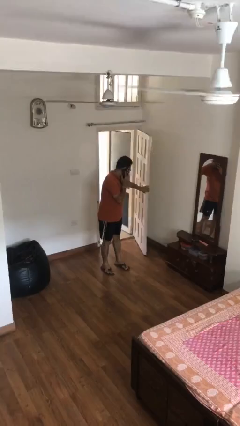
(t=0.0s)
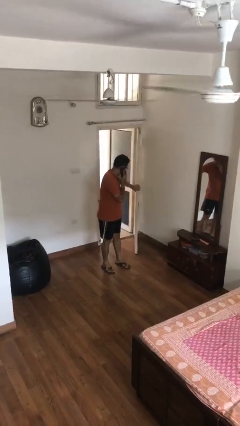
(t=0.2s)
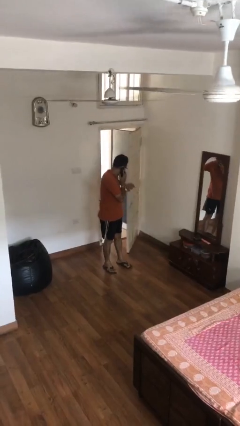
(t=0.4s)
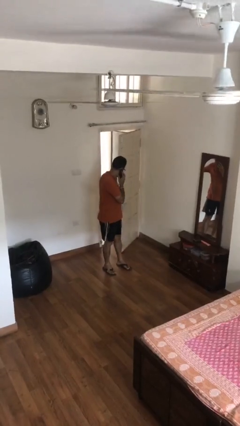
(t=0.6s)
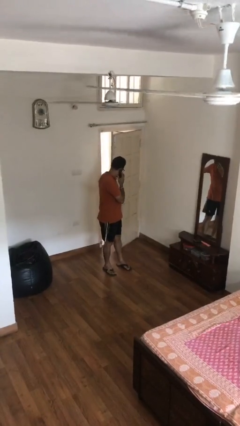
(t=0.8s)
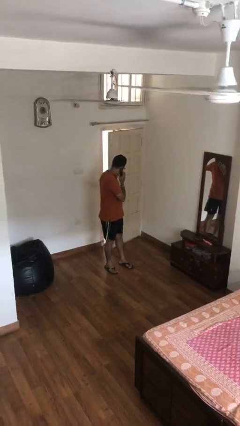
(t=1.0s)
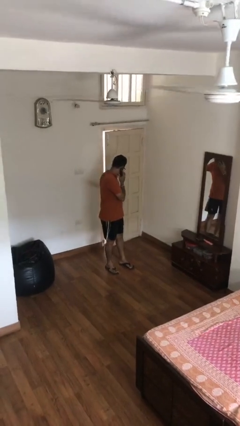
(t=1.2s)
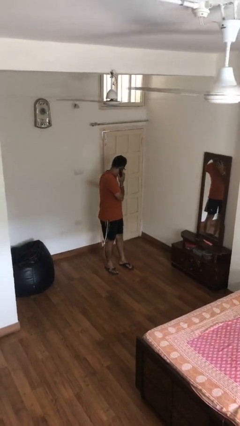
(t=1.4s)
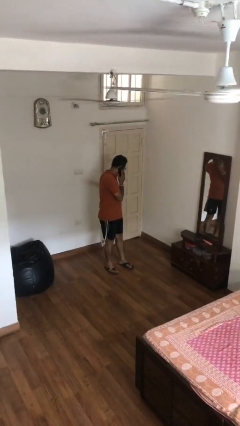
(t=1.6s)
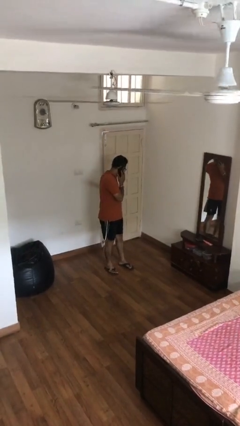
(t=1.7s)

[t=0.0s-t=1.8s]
person closes facility door

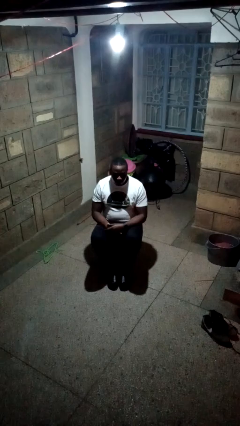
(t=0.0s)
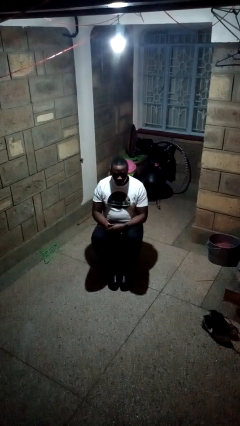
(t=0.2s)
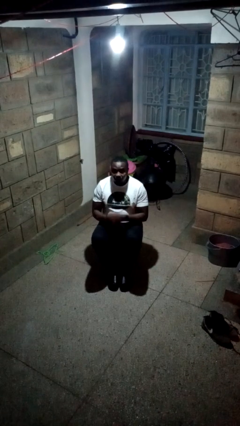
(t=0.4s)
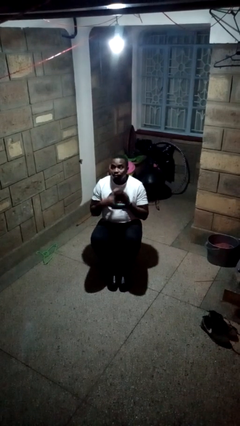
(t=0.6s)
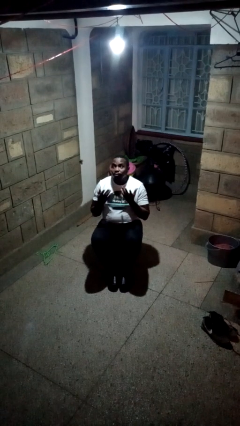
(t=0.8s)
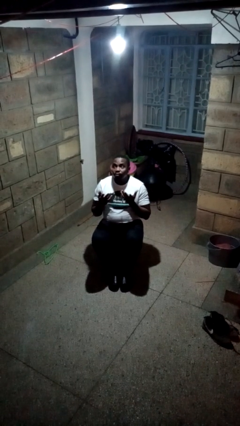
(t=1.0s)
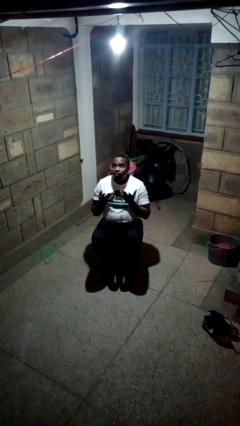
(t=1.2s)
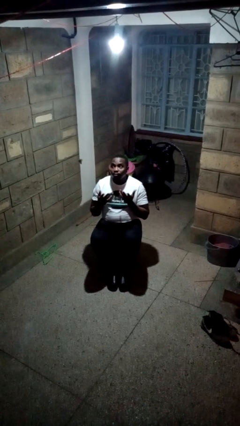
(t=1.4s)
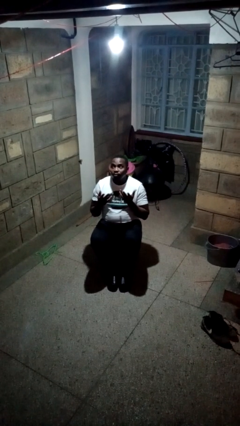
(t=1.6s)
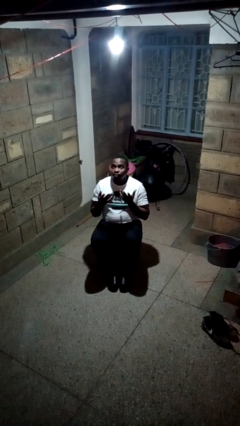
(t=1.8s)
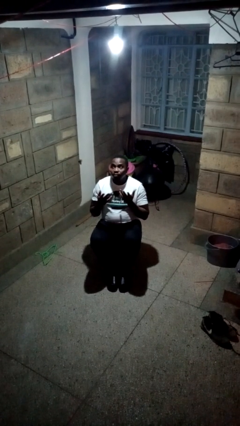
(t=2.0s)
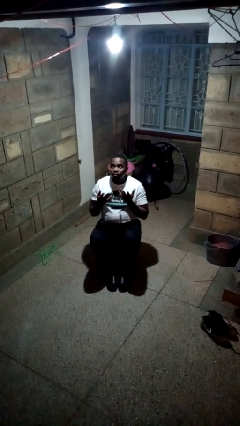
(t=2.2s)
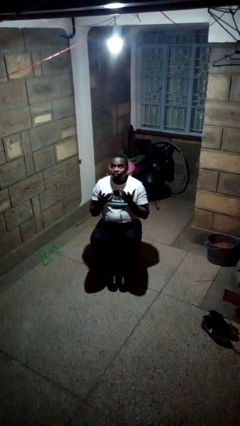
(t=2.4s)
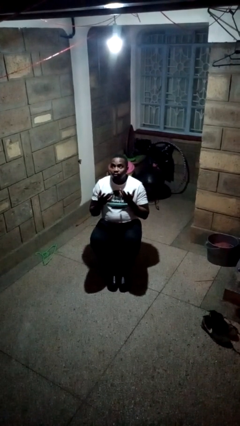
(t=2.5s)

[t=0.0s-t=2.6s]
person shrugs

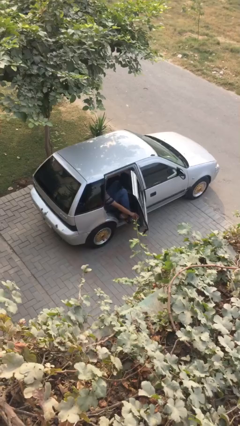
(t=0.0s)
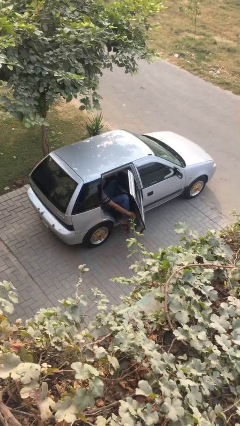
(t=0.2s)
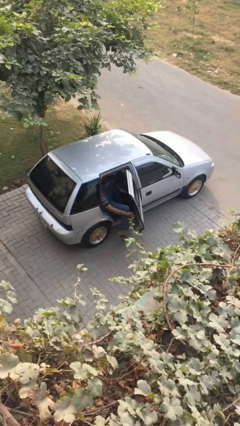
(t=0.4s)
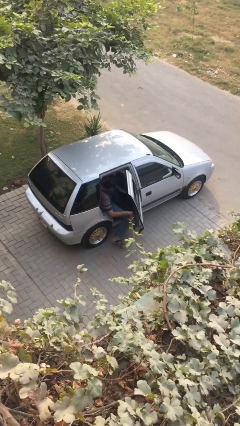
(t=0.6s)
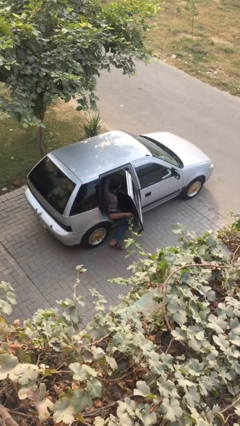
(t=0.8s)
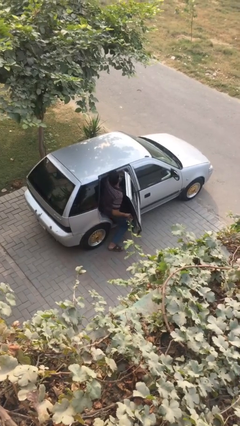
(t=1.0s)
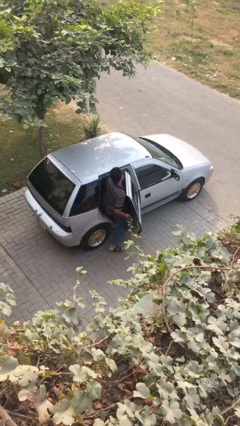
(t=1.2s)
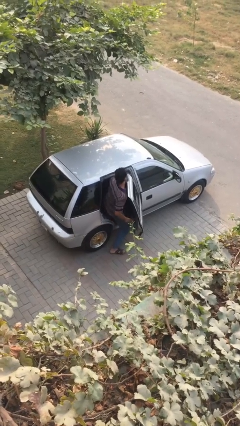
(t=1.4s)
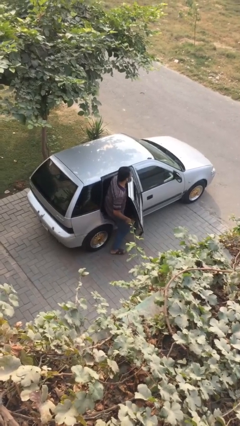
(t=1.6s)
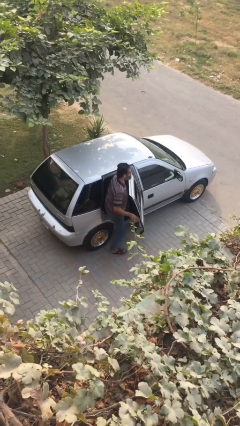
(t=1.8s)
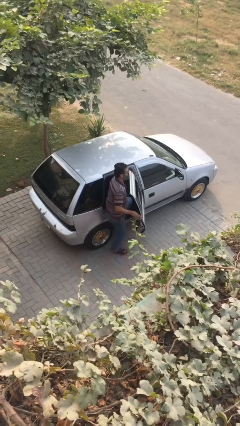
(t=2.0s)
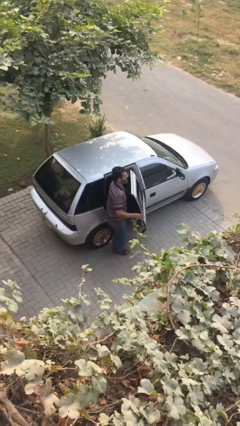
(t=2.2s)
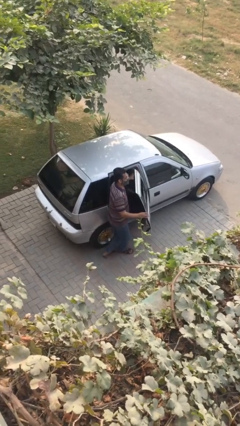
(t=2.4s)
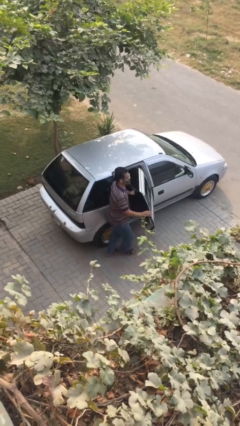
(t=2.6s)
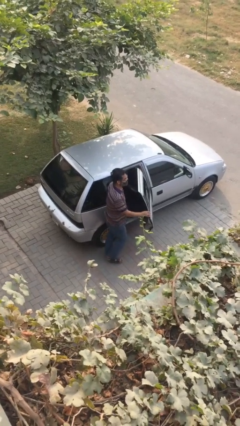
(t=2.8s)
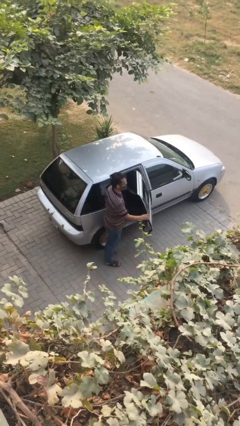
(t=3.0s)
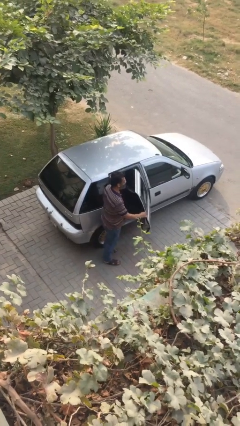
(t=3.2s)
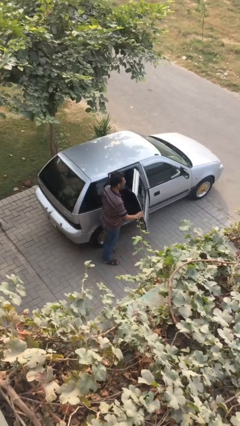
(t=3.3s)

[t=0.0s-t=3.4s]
person exits car

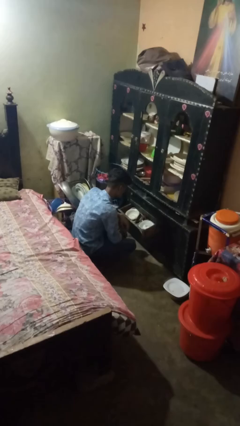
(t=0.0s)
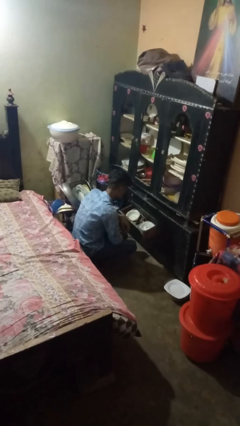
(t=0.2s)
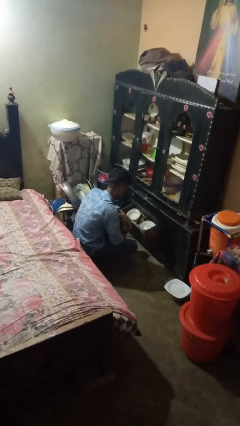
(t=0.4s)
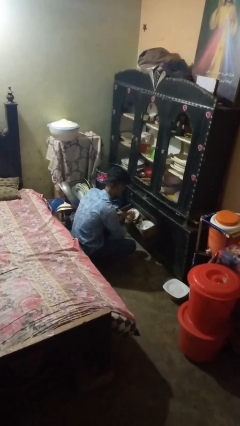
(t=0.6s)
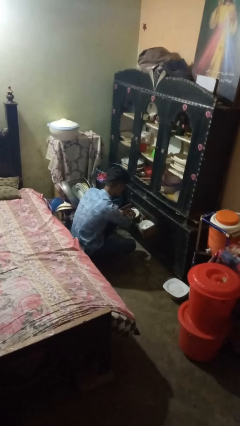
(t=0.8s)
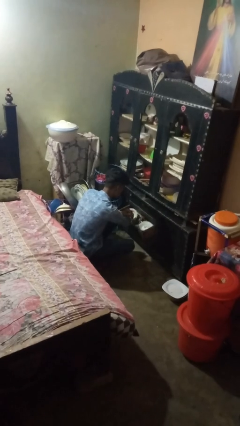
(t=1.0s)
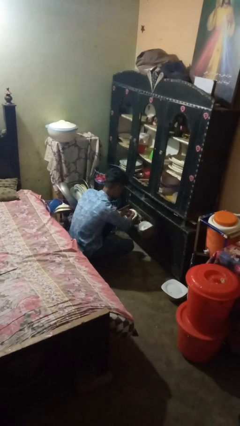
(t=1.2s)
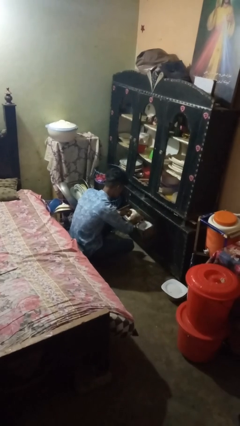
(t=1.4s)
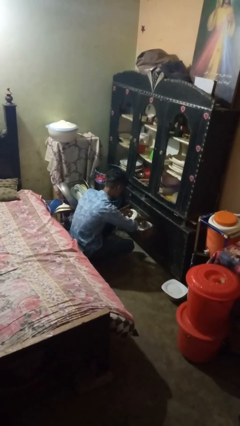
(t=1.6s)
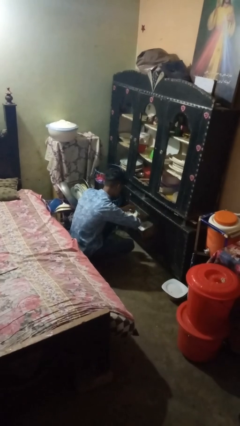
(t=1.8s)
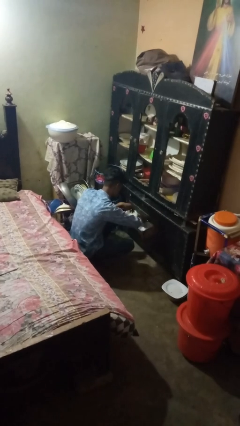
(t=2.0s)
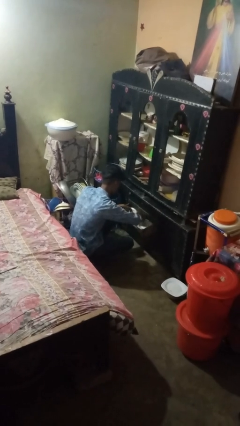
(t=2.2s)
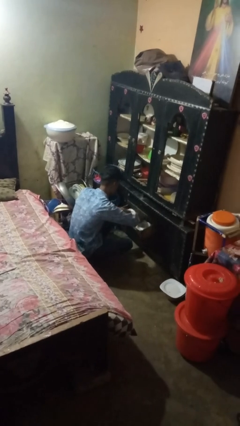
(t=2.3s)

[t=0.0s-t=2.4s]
person searches in kitchen drawer

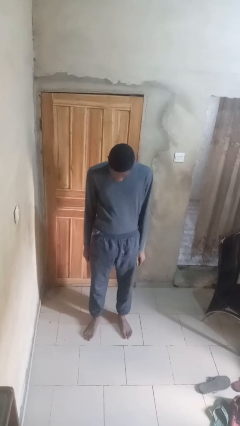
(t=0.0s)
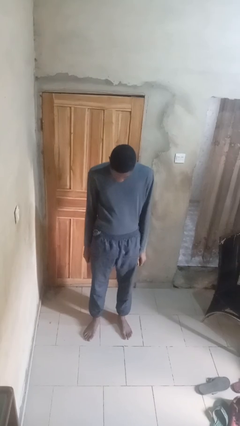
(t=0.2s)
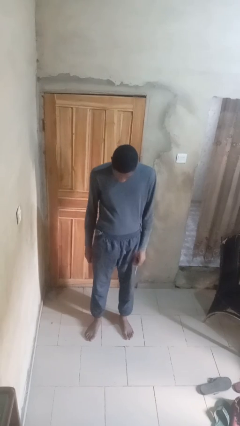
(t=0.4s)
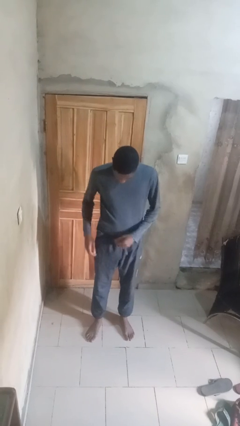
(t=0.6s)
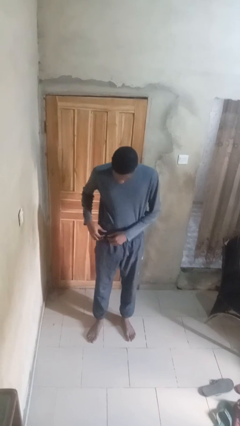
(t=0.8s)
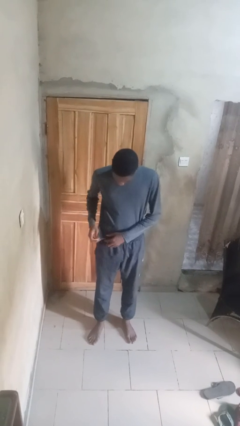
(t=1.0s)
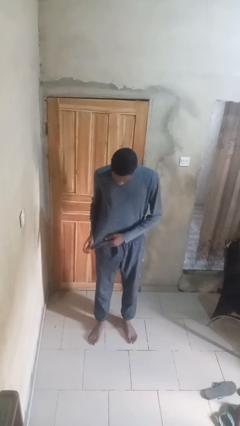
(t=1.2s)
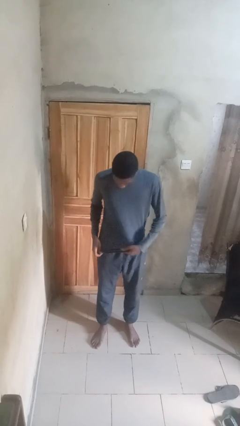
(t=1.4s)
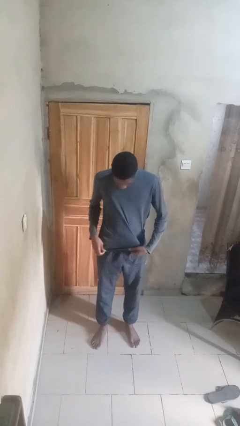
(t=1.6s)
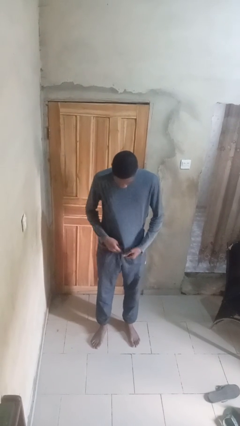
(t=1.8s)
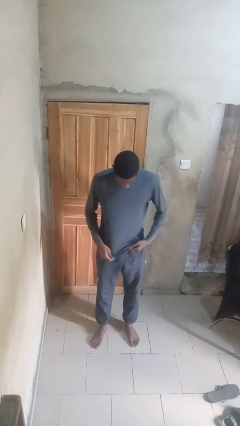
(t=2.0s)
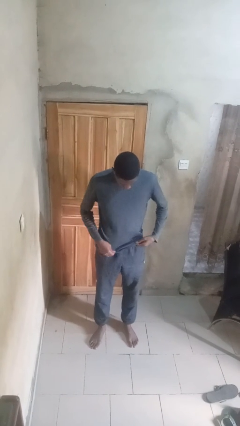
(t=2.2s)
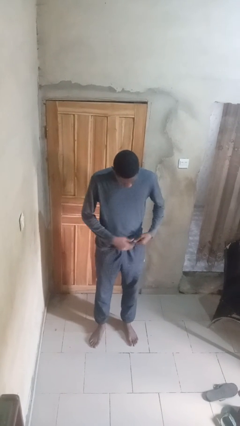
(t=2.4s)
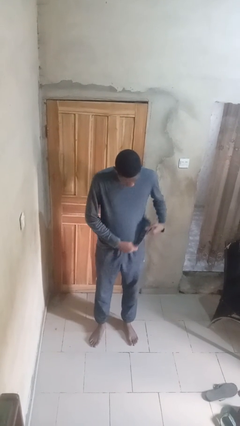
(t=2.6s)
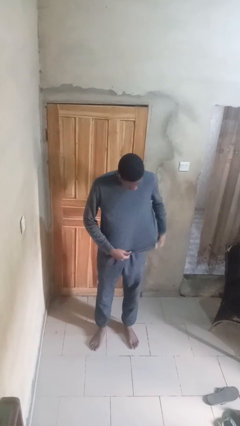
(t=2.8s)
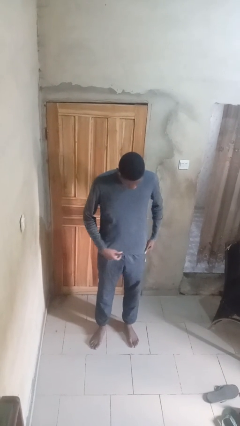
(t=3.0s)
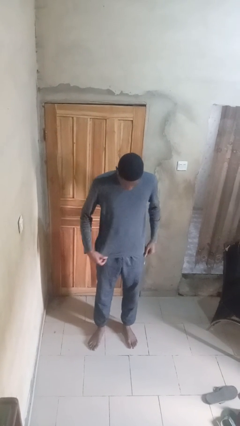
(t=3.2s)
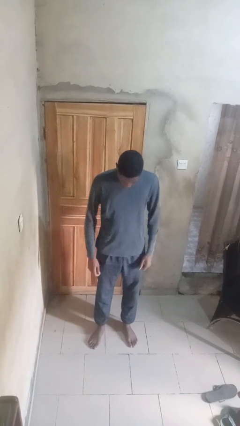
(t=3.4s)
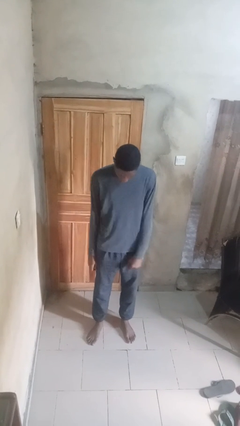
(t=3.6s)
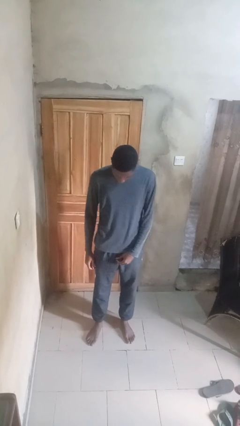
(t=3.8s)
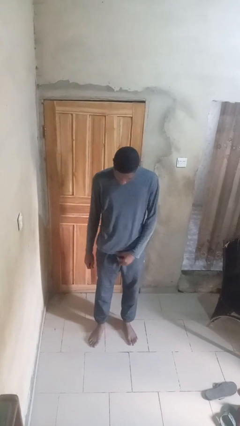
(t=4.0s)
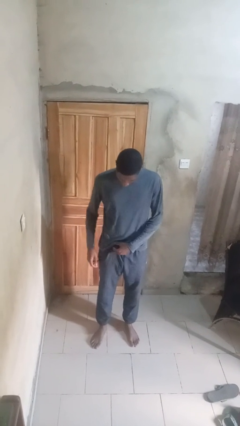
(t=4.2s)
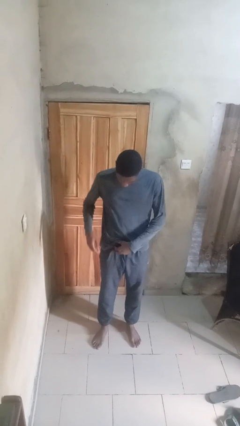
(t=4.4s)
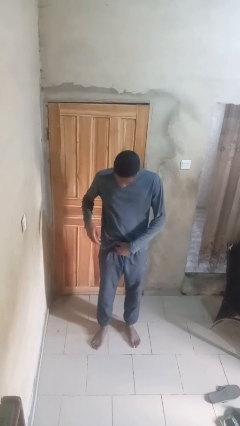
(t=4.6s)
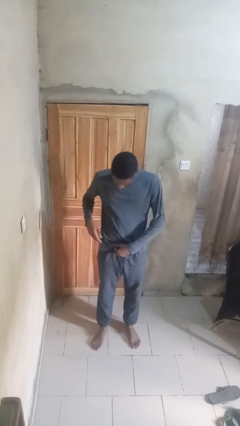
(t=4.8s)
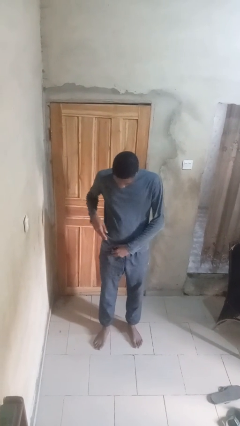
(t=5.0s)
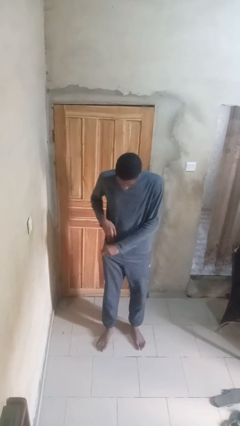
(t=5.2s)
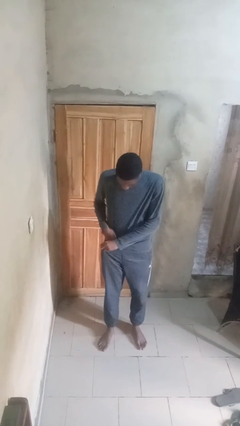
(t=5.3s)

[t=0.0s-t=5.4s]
person untucks shirt

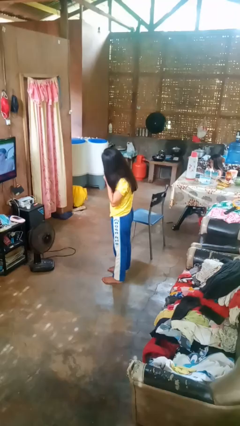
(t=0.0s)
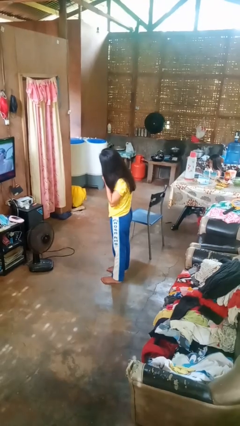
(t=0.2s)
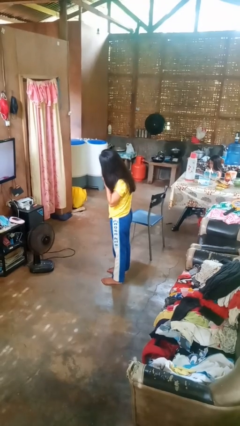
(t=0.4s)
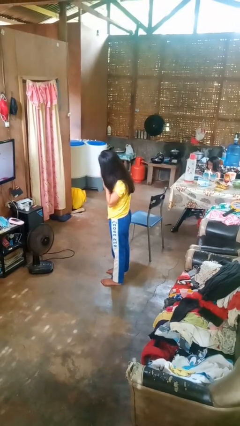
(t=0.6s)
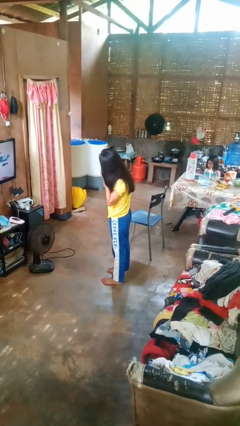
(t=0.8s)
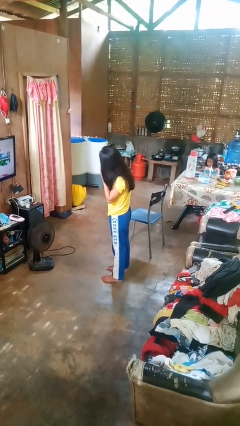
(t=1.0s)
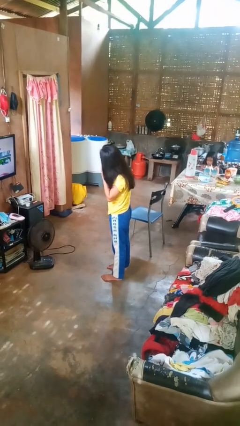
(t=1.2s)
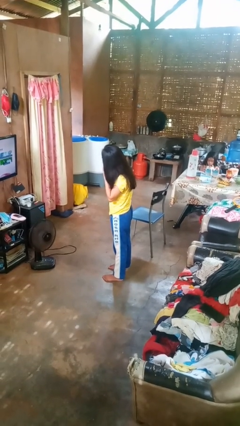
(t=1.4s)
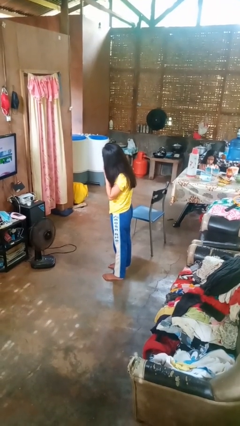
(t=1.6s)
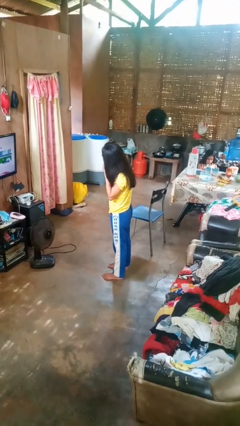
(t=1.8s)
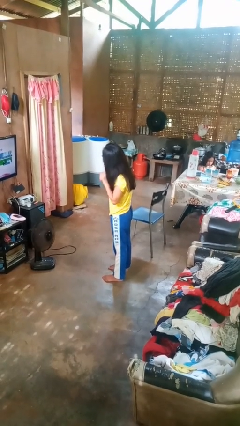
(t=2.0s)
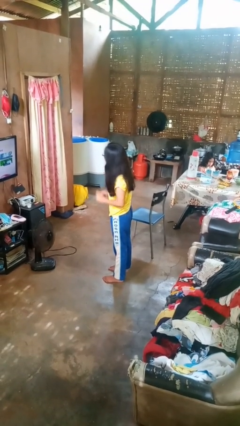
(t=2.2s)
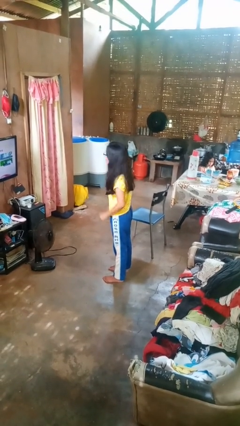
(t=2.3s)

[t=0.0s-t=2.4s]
person puts on earrings
